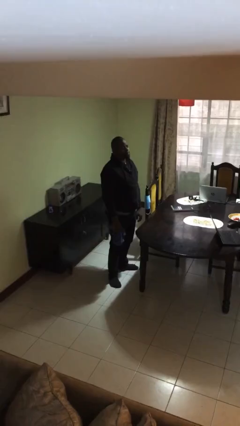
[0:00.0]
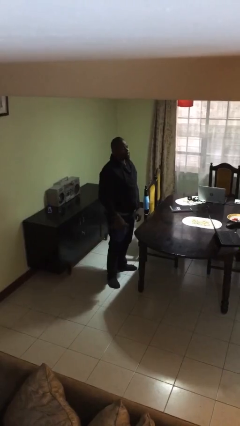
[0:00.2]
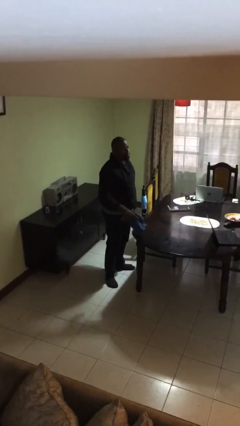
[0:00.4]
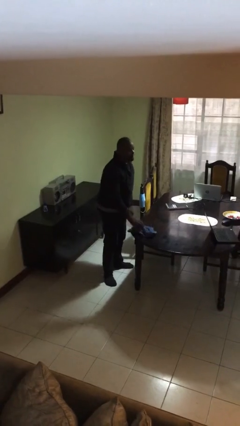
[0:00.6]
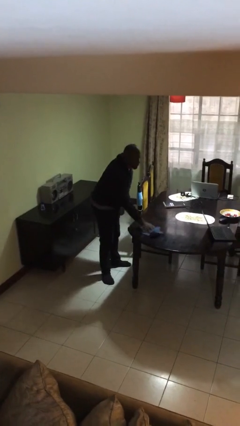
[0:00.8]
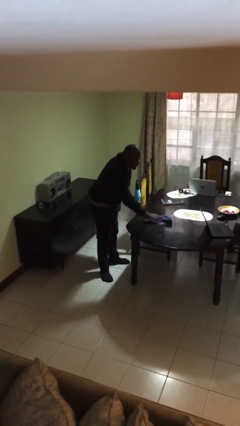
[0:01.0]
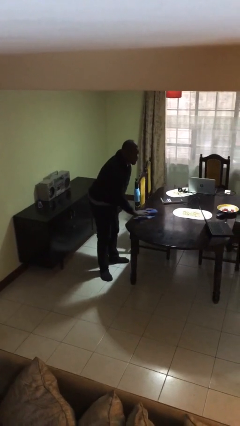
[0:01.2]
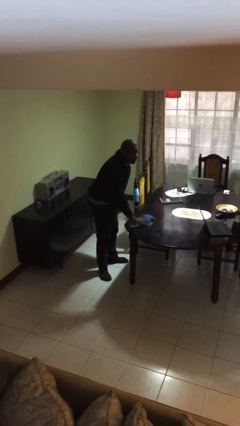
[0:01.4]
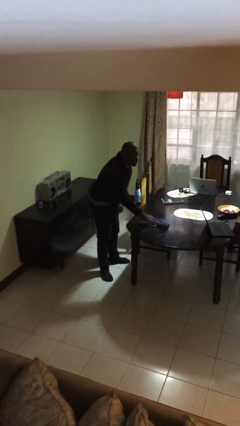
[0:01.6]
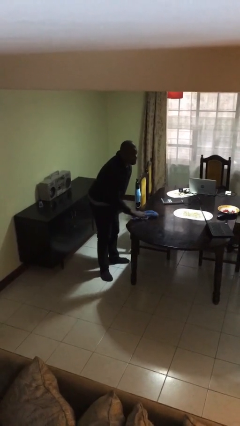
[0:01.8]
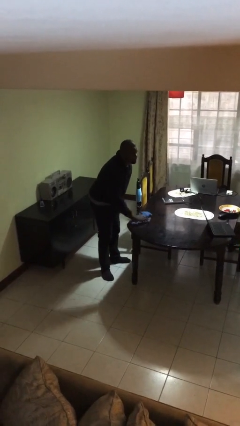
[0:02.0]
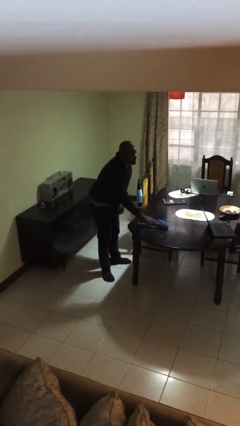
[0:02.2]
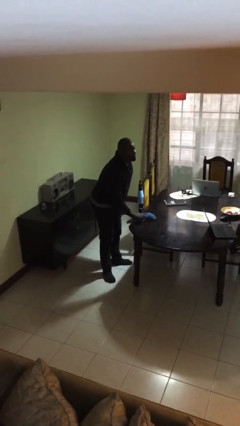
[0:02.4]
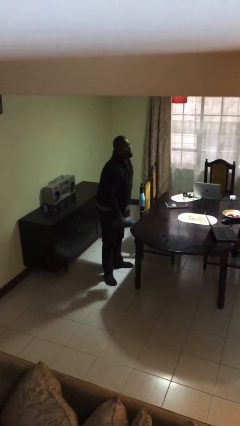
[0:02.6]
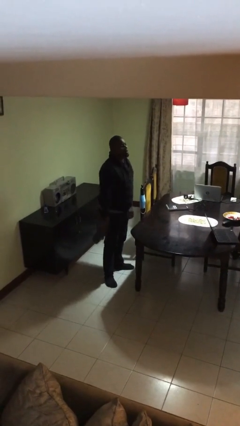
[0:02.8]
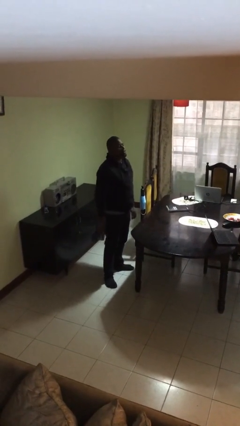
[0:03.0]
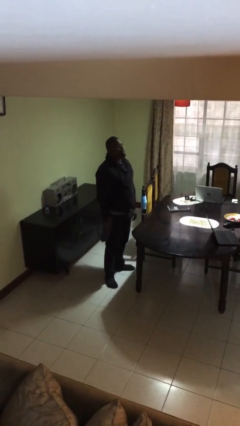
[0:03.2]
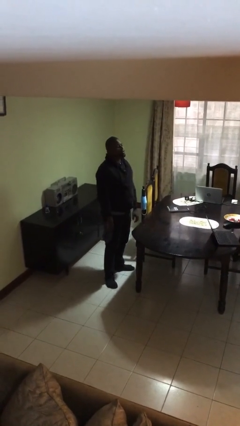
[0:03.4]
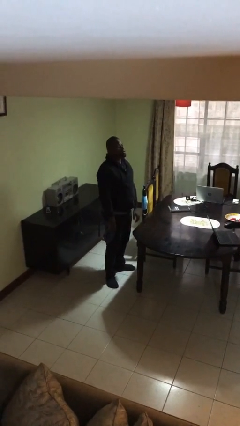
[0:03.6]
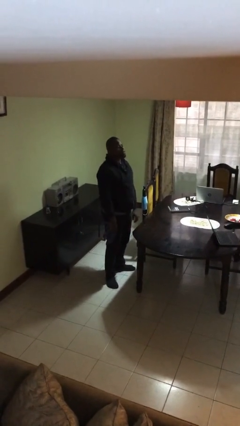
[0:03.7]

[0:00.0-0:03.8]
person cleans table with rag

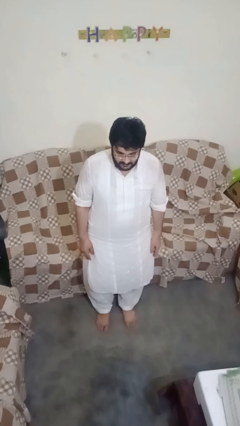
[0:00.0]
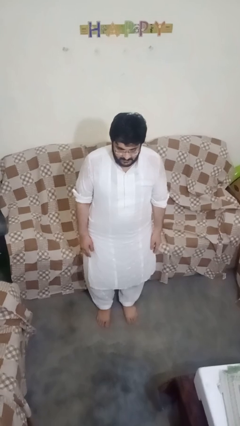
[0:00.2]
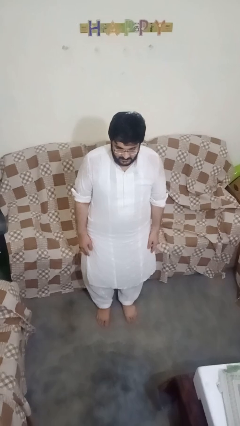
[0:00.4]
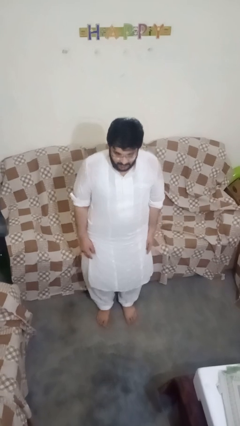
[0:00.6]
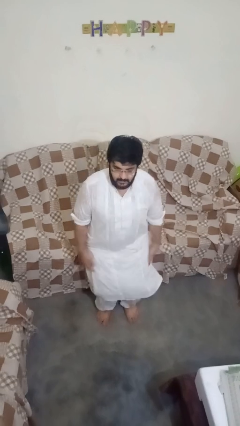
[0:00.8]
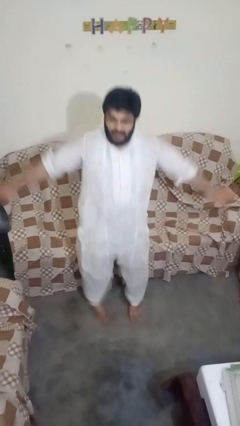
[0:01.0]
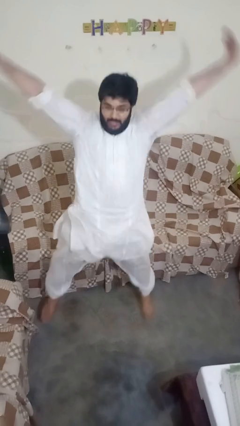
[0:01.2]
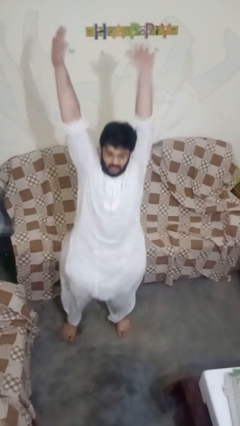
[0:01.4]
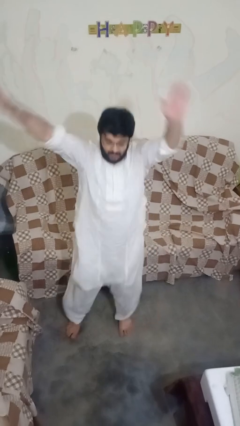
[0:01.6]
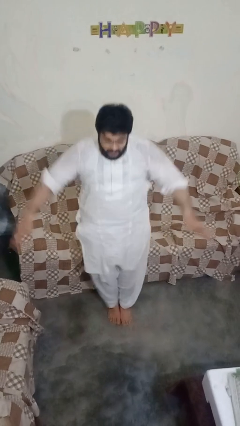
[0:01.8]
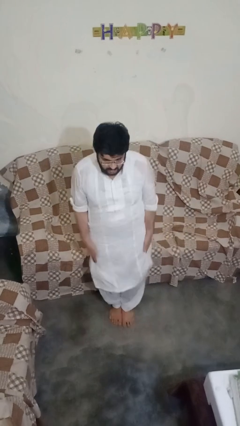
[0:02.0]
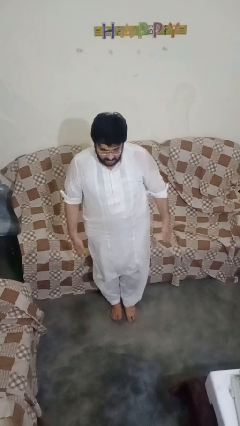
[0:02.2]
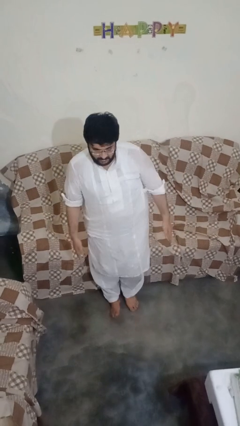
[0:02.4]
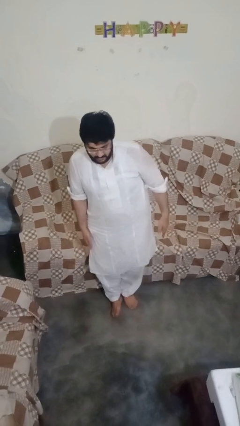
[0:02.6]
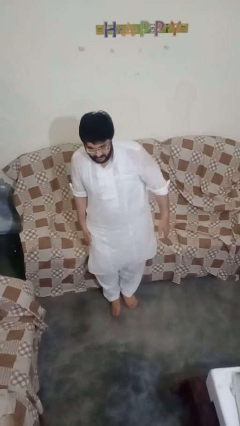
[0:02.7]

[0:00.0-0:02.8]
person exercises with jumping jacks

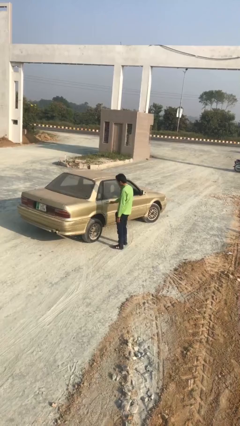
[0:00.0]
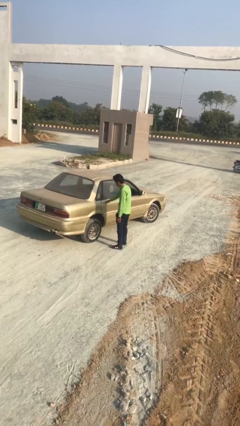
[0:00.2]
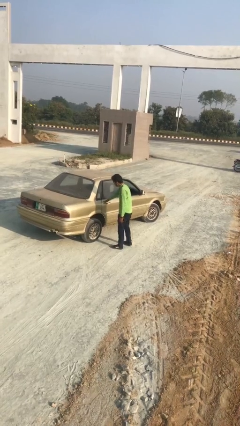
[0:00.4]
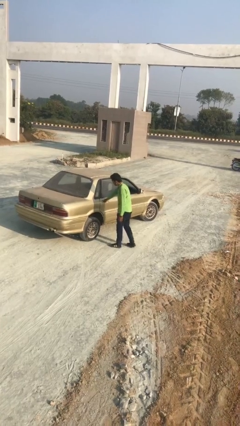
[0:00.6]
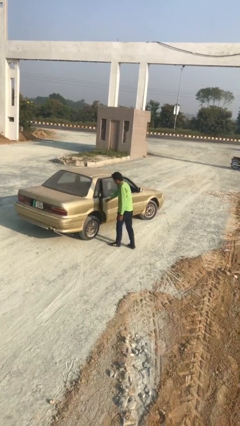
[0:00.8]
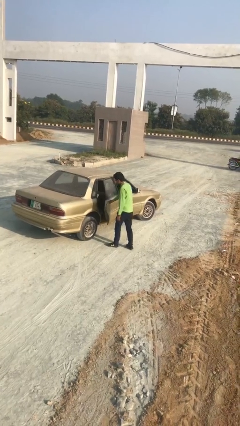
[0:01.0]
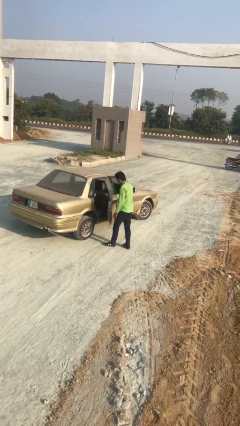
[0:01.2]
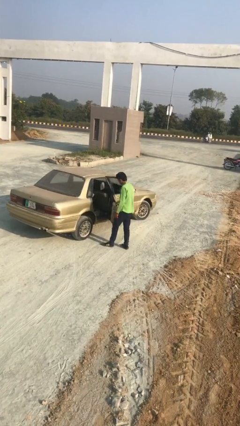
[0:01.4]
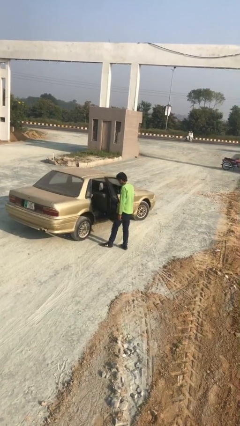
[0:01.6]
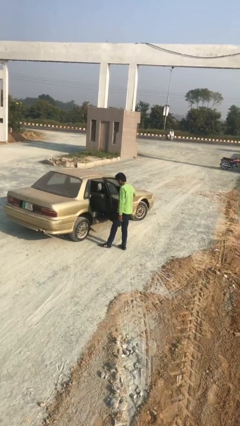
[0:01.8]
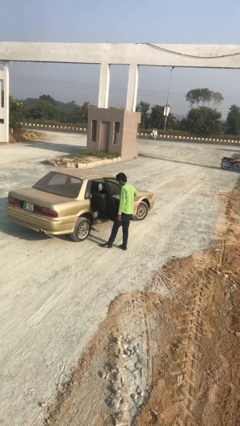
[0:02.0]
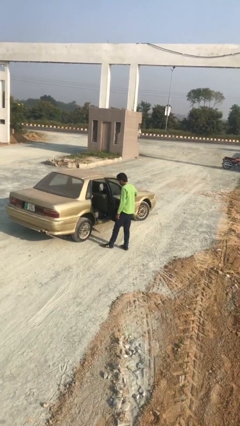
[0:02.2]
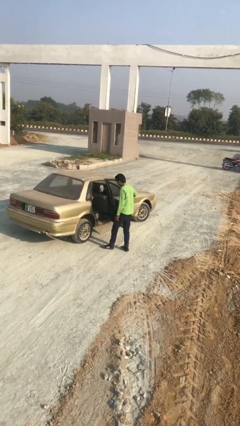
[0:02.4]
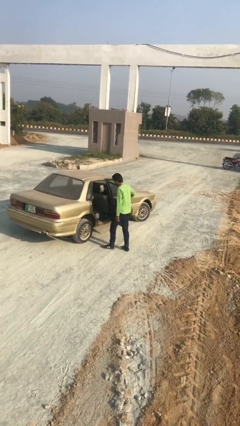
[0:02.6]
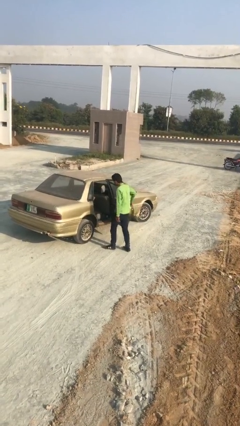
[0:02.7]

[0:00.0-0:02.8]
person opens car door

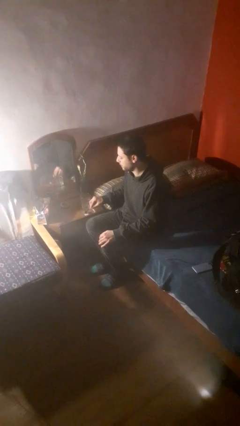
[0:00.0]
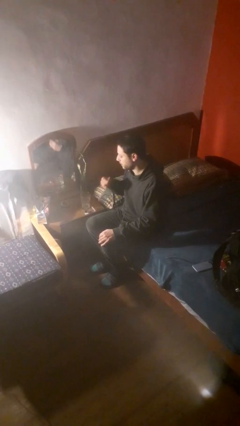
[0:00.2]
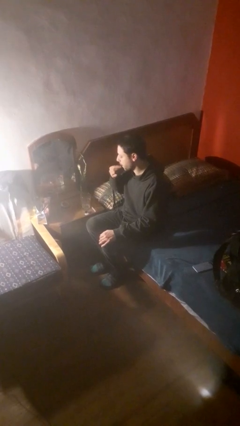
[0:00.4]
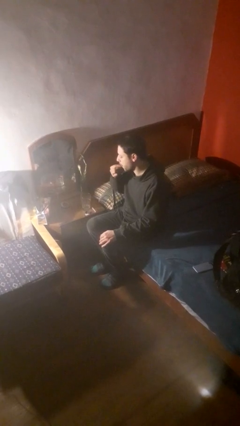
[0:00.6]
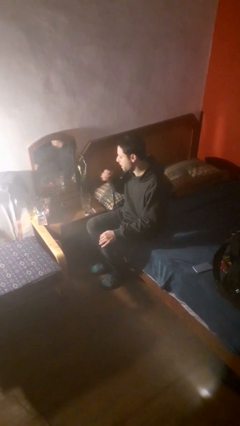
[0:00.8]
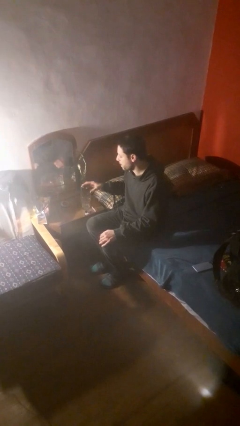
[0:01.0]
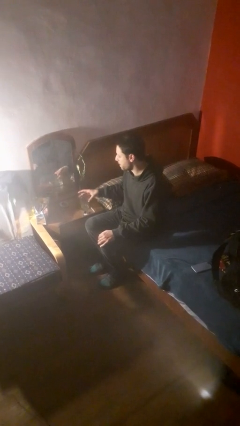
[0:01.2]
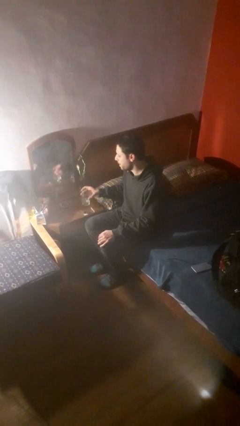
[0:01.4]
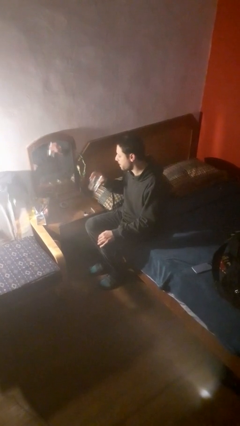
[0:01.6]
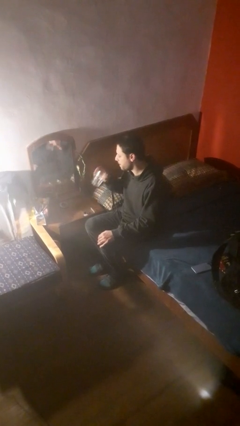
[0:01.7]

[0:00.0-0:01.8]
person takes medicine pills

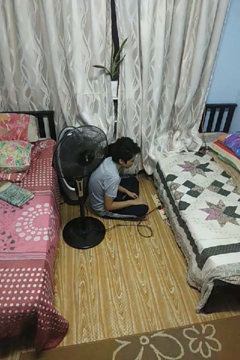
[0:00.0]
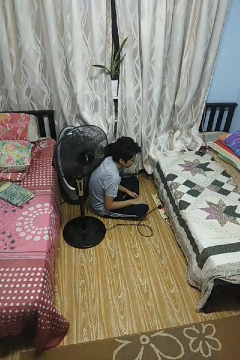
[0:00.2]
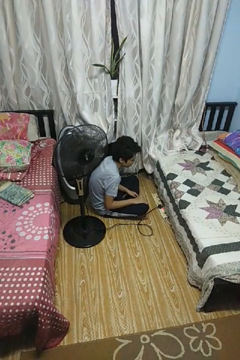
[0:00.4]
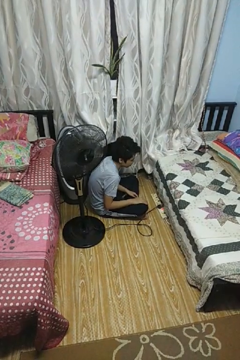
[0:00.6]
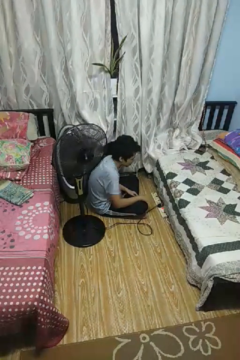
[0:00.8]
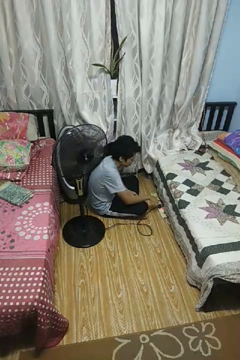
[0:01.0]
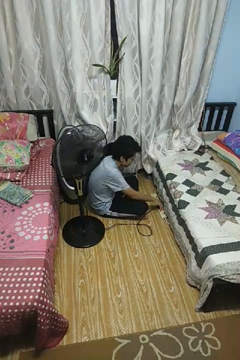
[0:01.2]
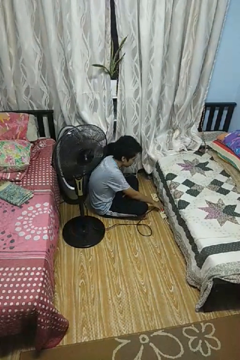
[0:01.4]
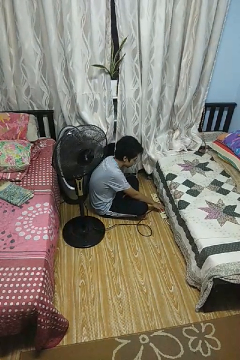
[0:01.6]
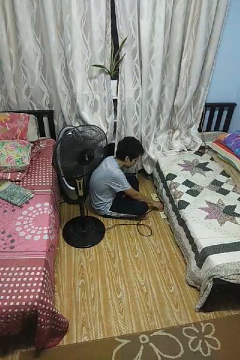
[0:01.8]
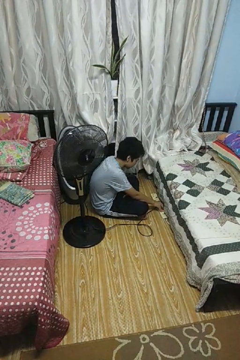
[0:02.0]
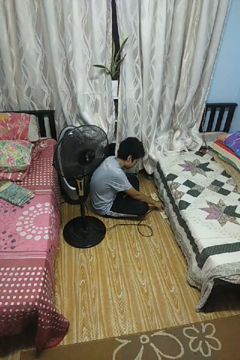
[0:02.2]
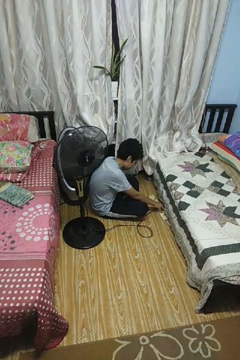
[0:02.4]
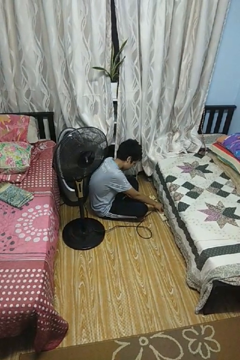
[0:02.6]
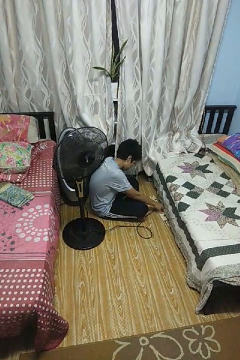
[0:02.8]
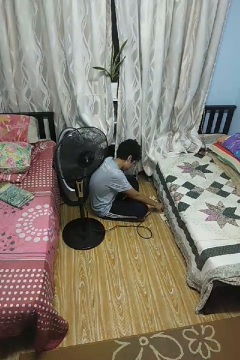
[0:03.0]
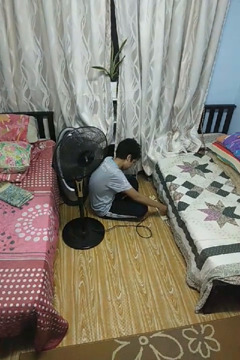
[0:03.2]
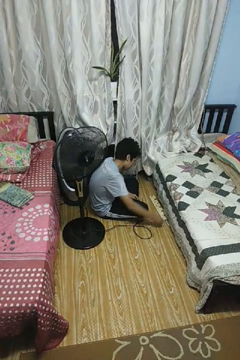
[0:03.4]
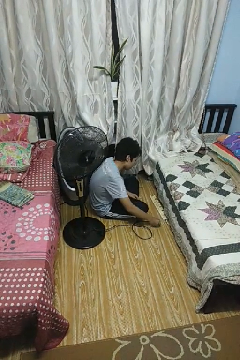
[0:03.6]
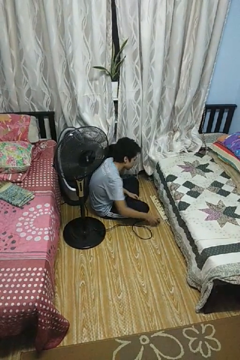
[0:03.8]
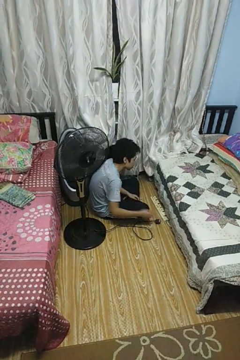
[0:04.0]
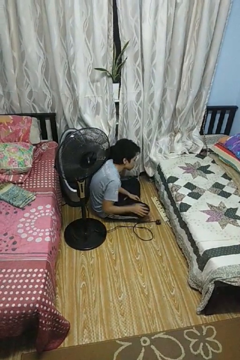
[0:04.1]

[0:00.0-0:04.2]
person unplugs from electrical socket

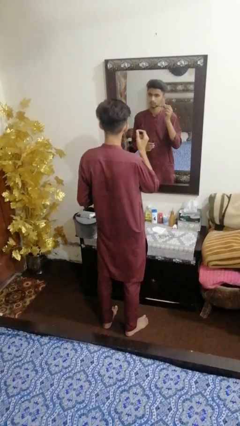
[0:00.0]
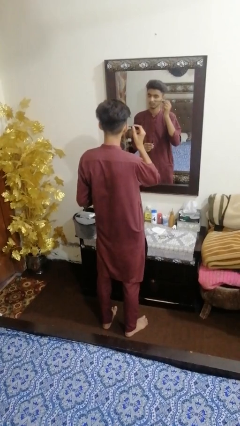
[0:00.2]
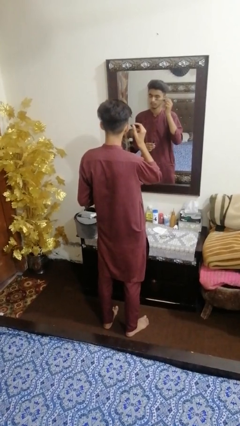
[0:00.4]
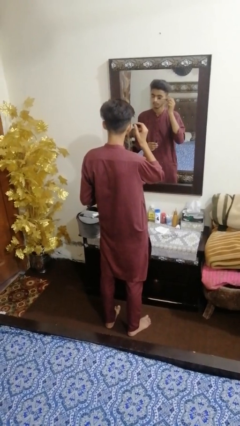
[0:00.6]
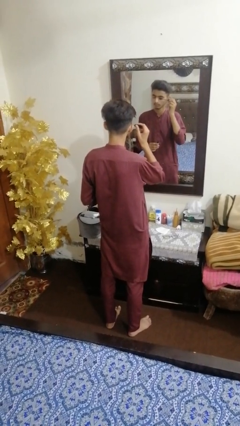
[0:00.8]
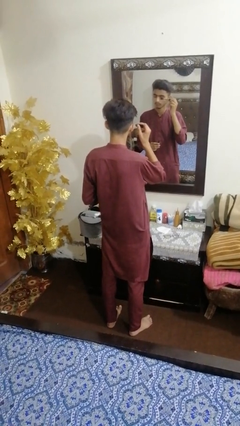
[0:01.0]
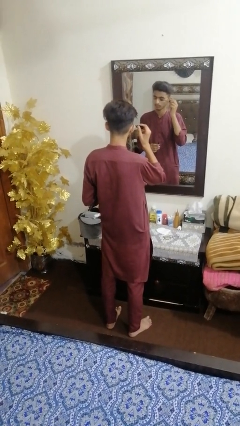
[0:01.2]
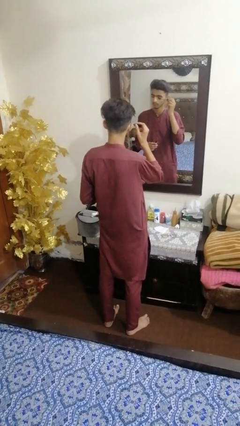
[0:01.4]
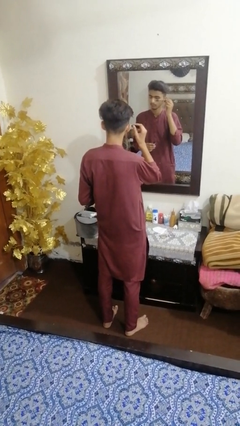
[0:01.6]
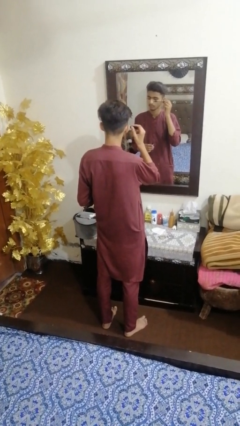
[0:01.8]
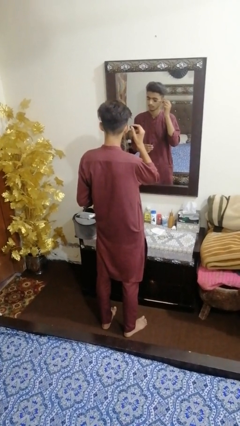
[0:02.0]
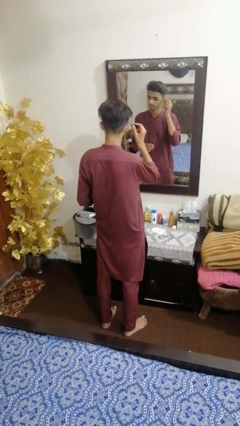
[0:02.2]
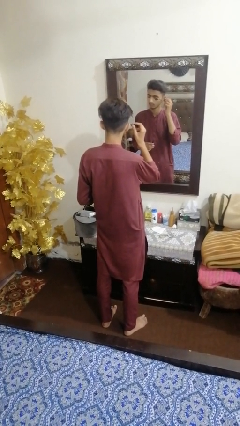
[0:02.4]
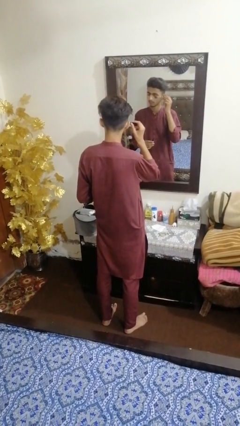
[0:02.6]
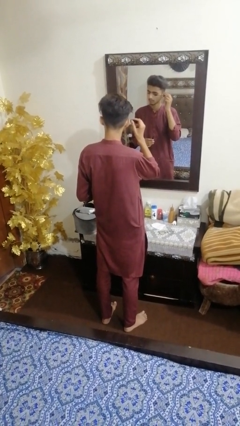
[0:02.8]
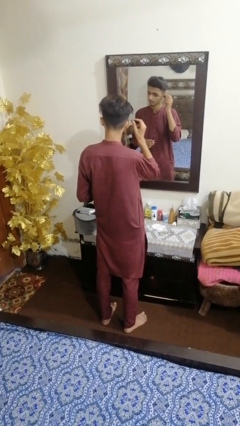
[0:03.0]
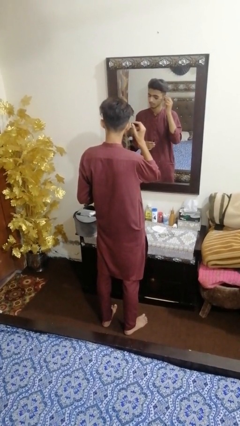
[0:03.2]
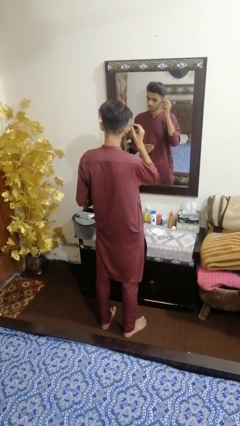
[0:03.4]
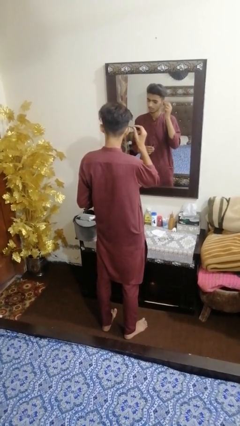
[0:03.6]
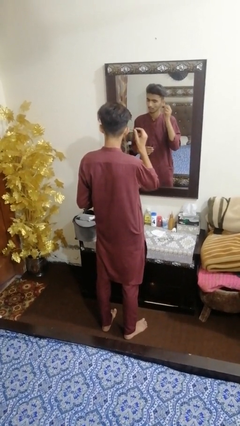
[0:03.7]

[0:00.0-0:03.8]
person applies eye makeup
